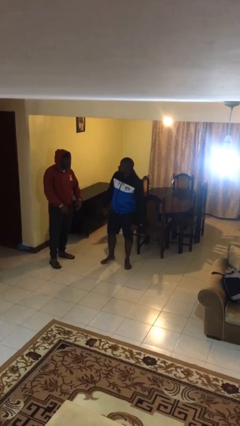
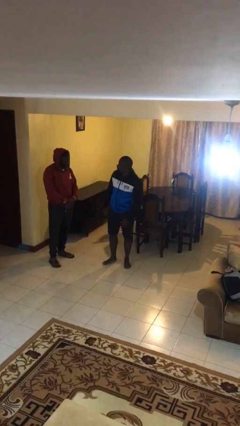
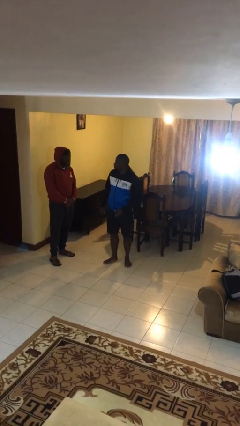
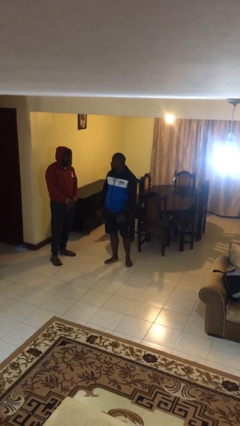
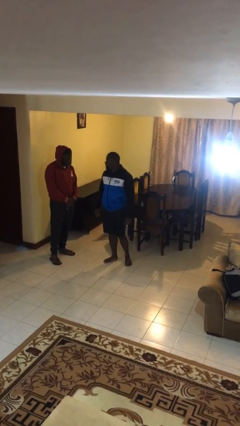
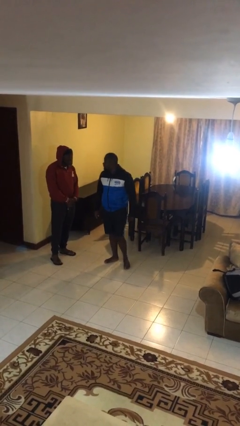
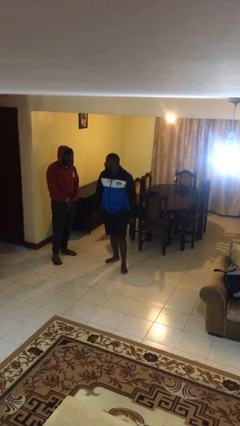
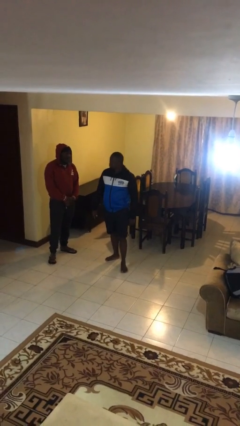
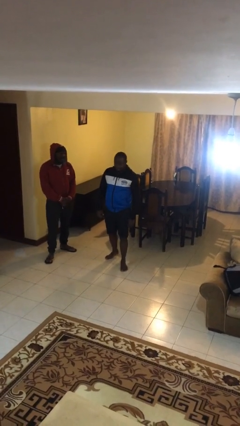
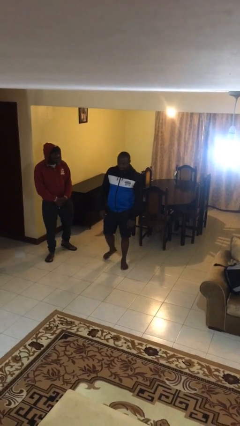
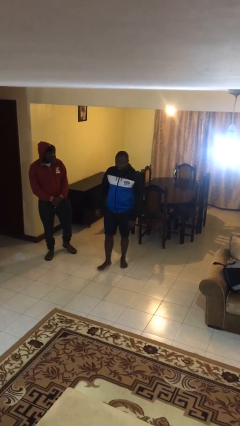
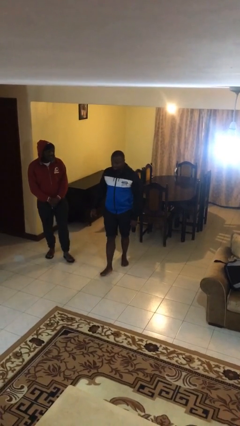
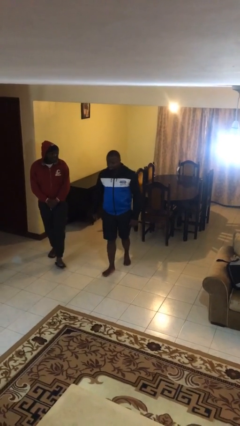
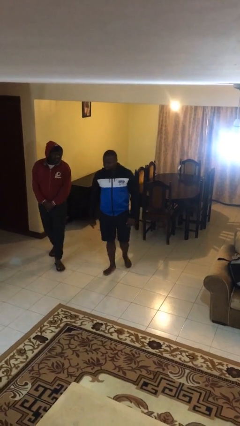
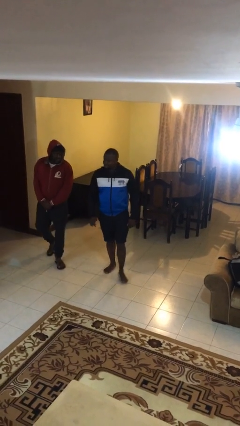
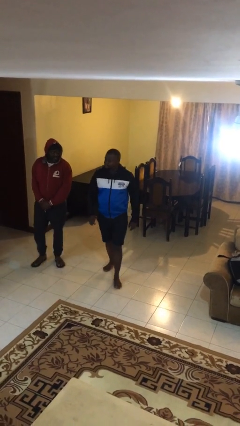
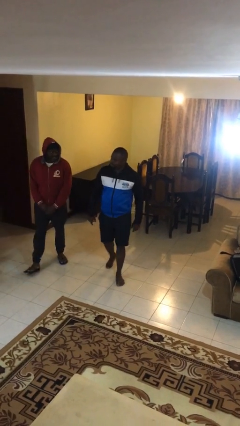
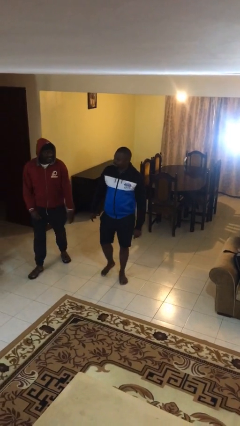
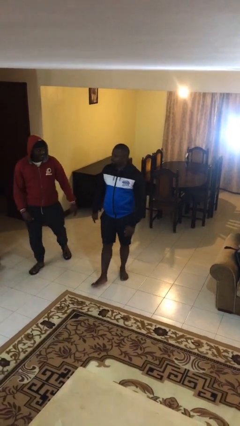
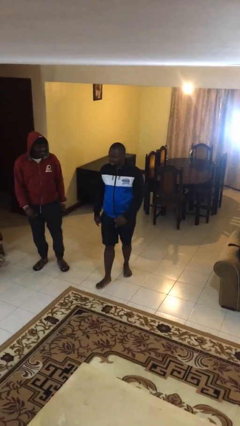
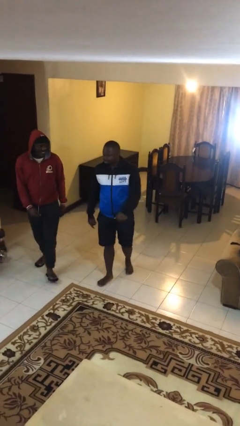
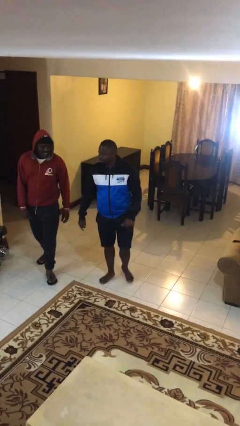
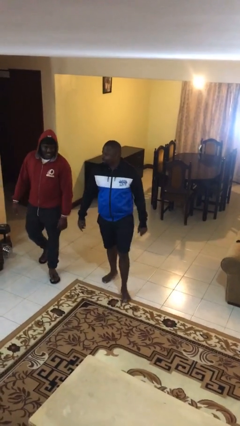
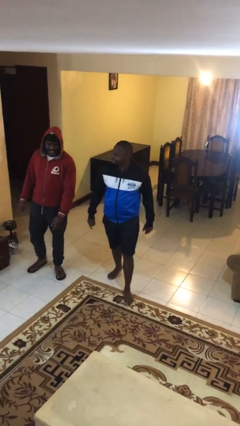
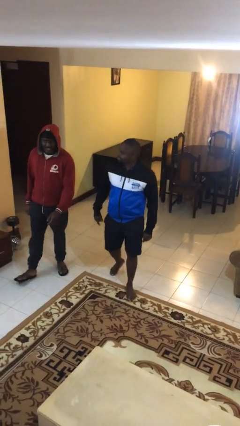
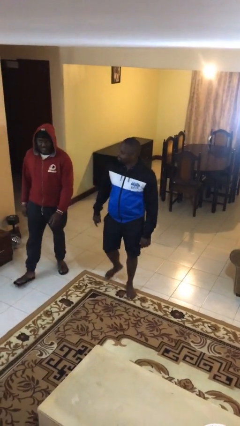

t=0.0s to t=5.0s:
person talks to person

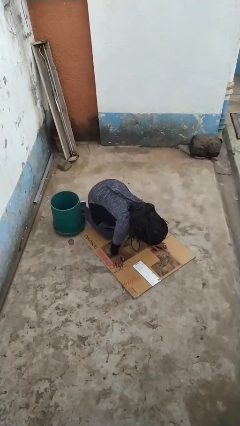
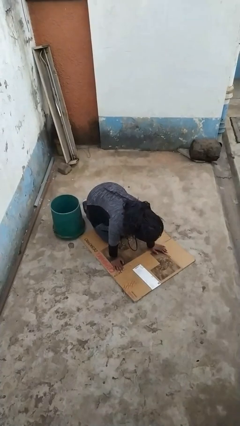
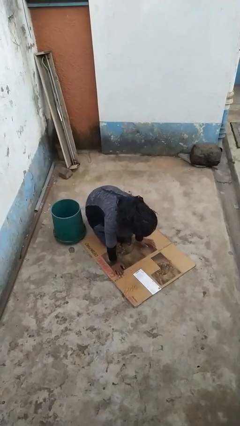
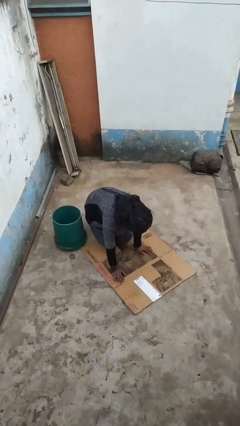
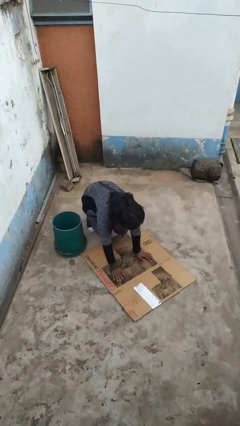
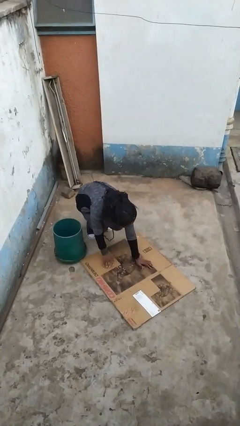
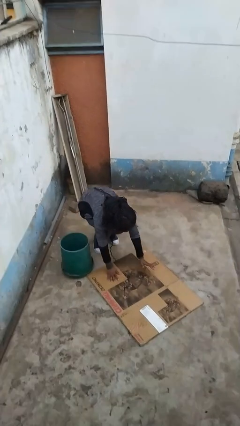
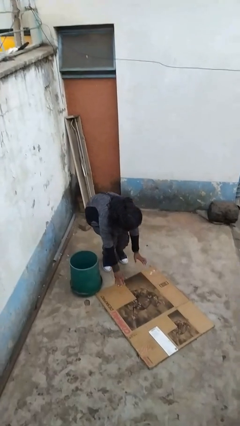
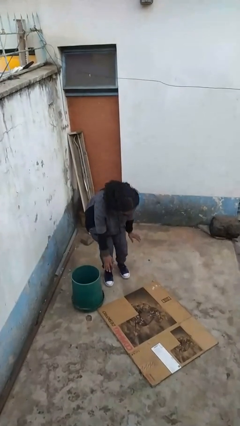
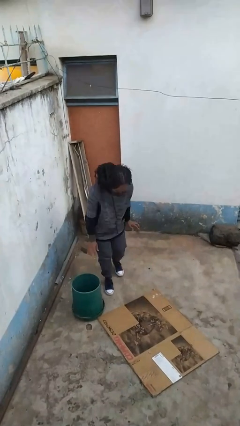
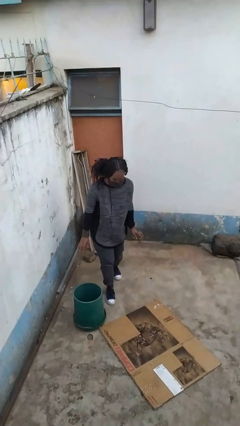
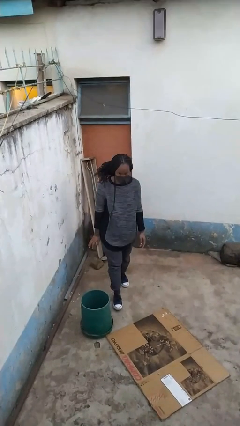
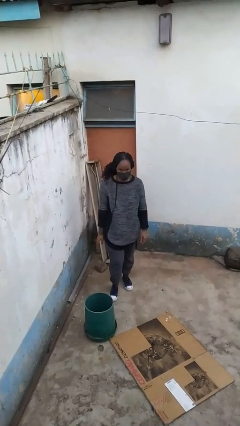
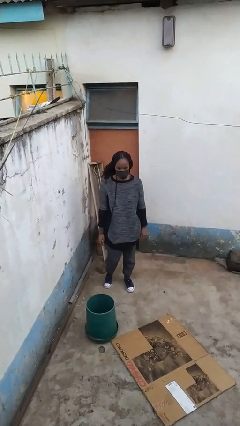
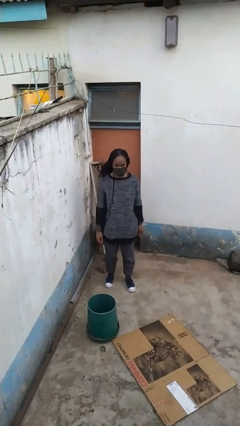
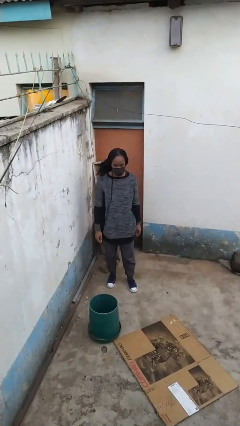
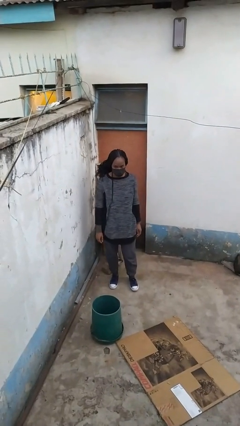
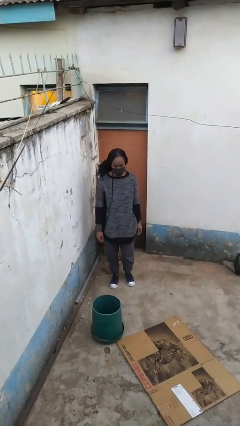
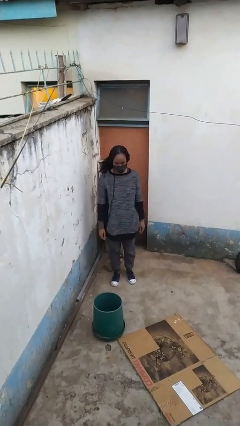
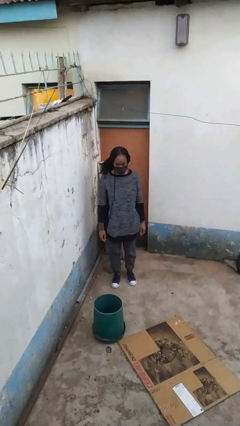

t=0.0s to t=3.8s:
person stands up from floor

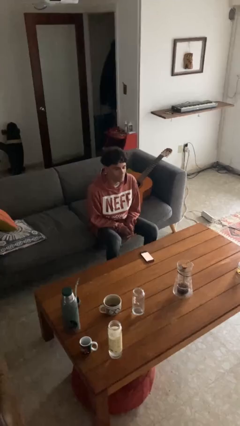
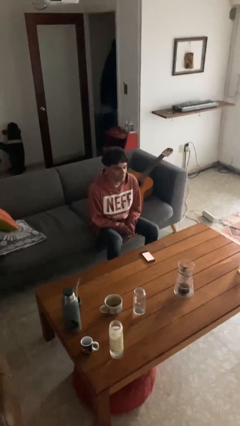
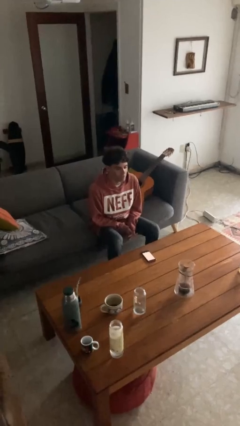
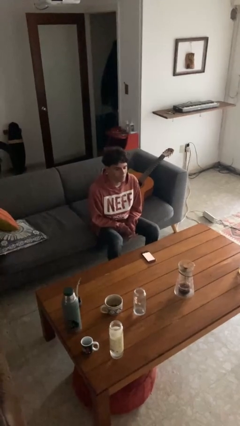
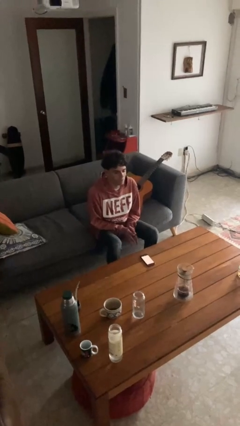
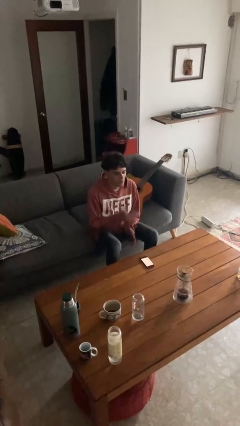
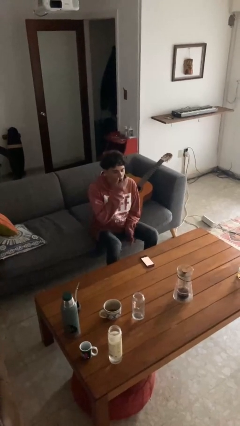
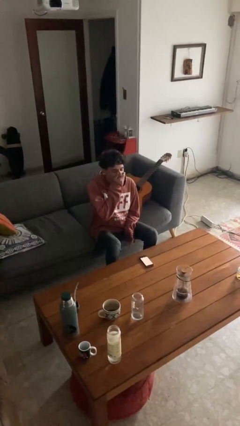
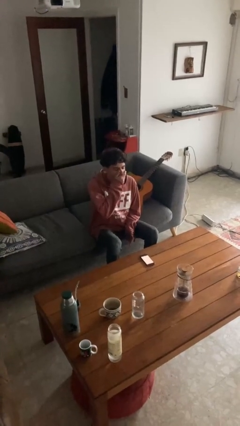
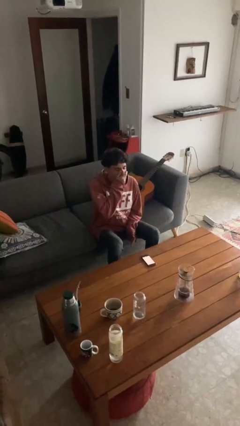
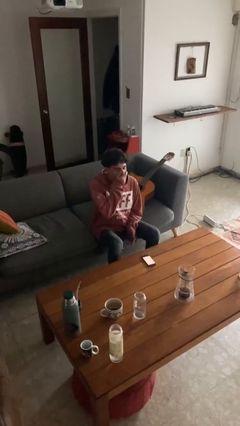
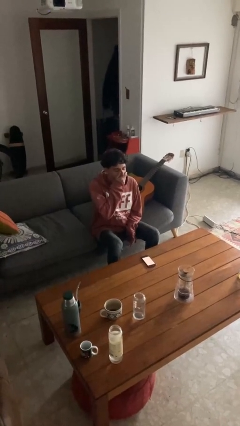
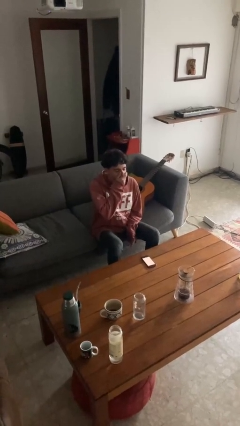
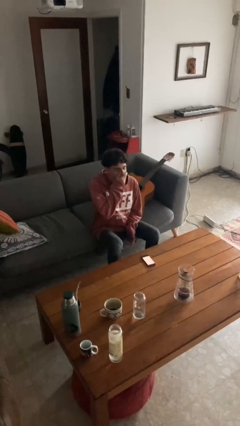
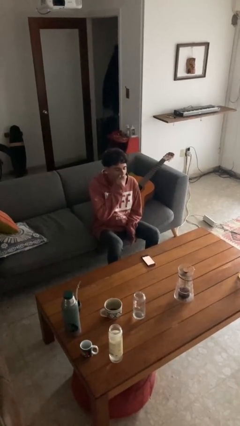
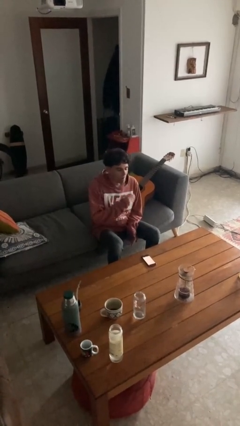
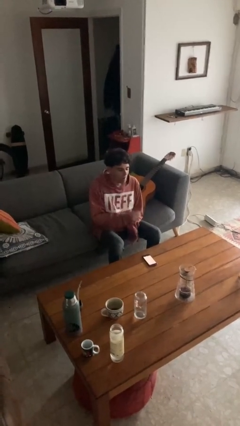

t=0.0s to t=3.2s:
person yawns

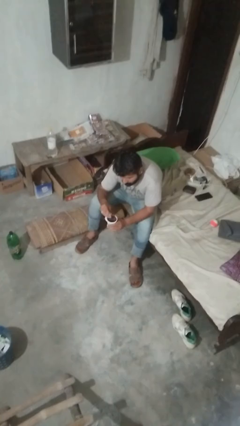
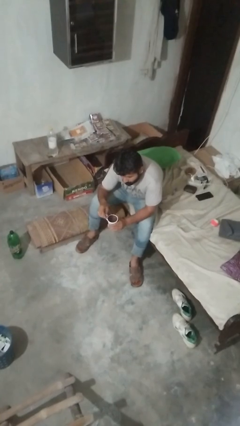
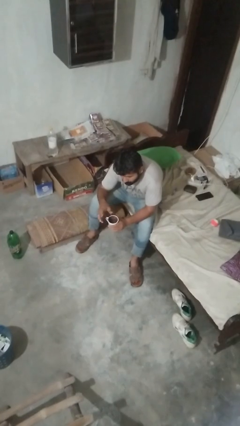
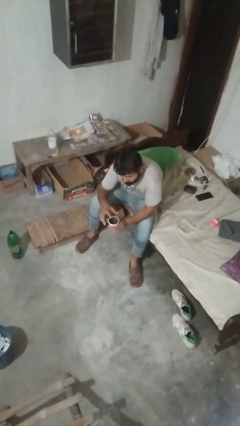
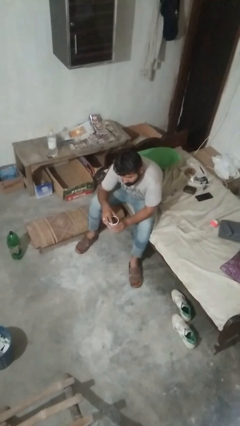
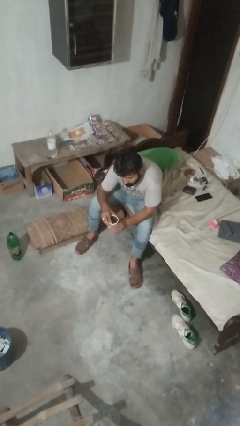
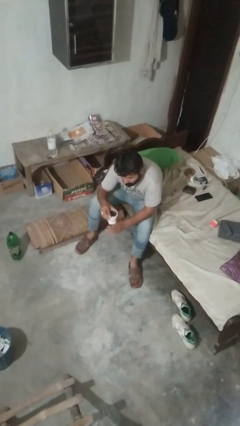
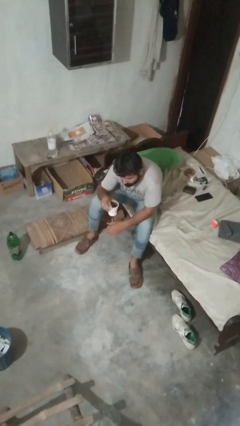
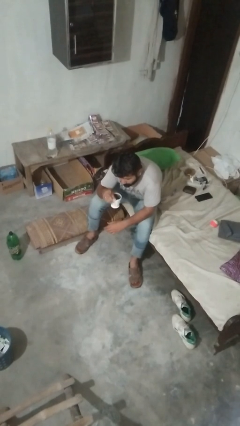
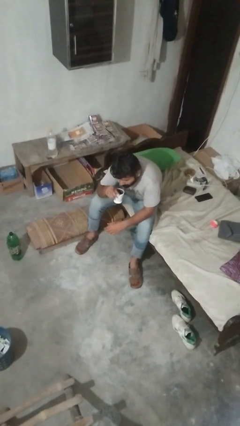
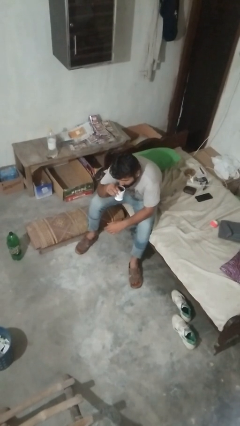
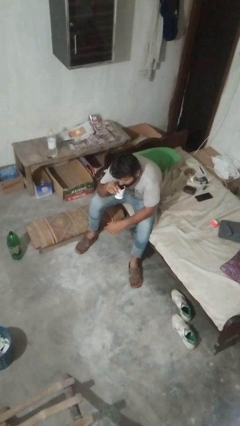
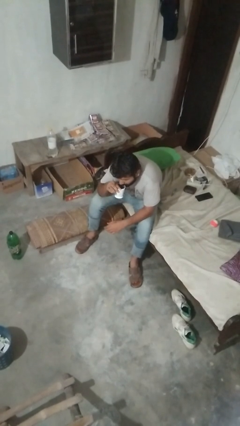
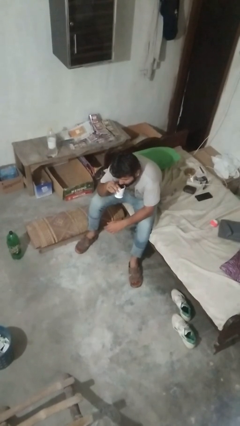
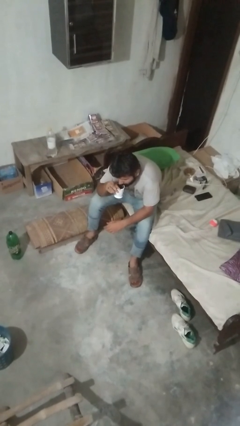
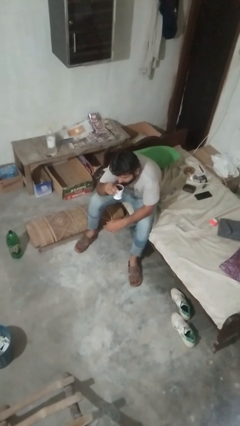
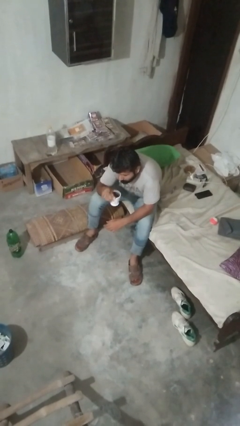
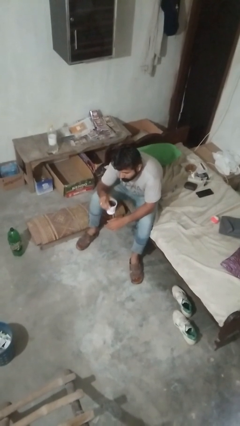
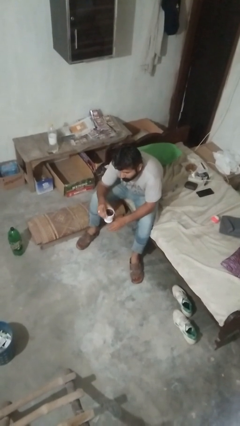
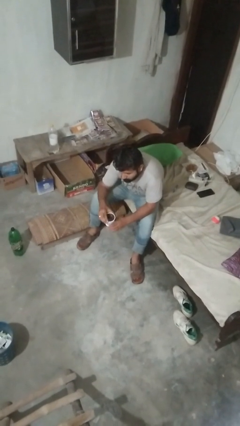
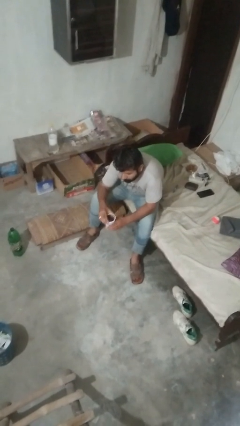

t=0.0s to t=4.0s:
person drinks from mug

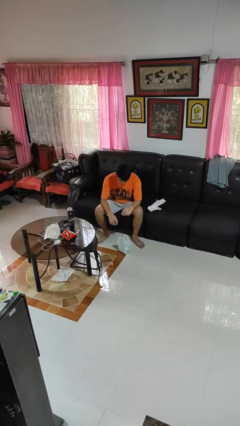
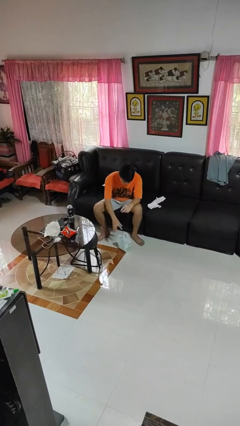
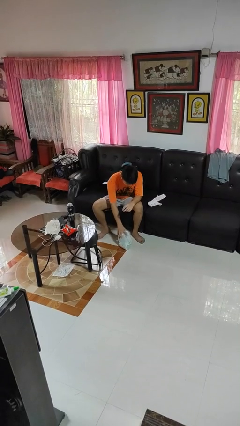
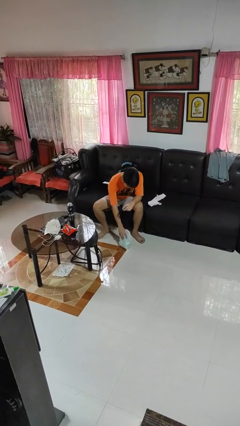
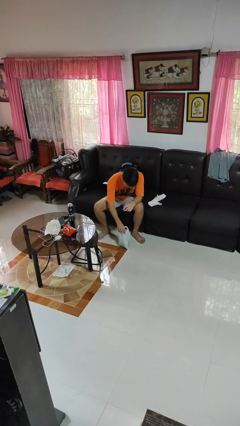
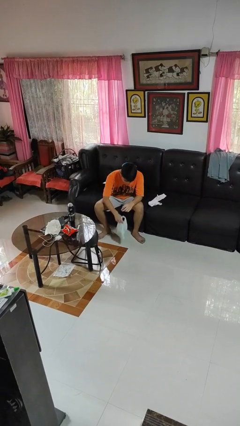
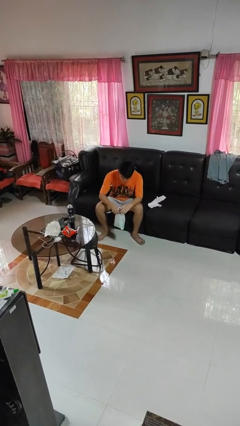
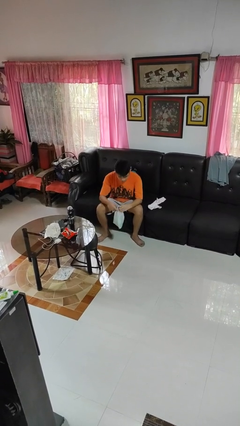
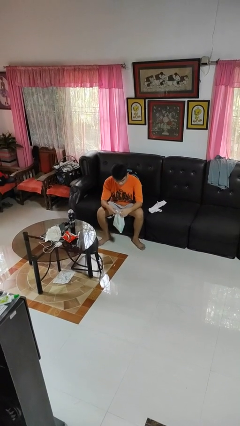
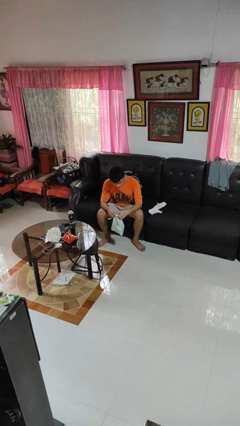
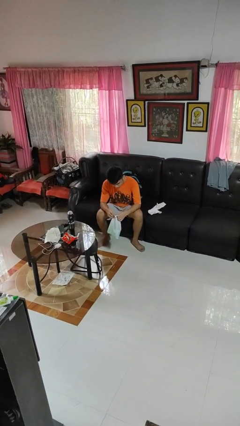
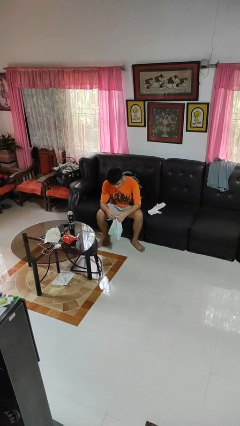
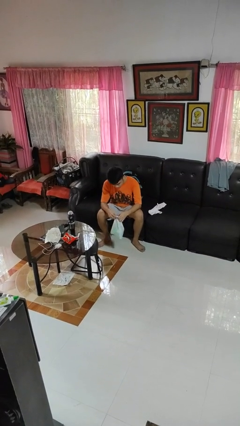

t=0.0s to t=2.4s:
person picks up object from floor
